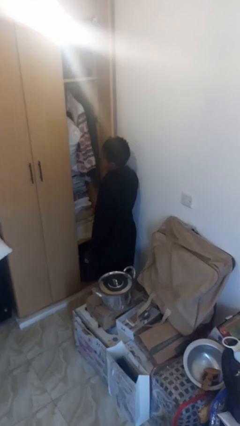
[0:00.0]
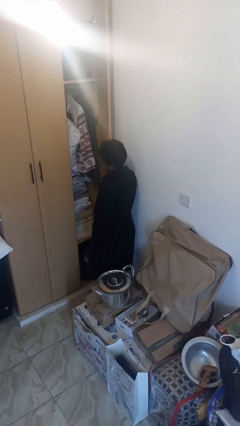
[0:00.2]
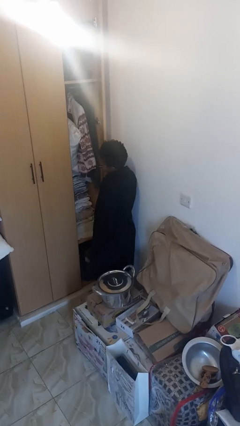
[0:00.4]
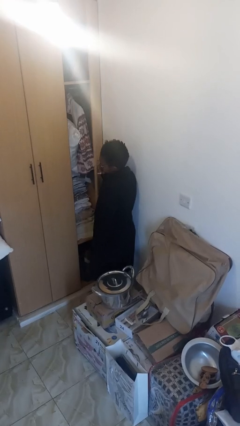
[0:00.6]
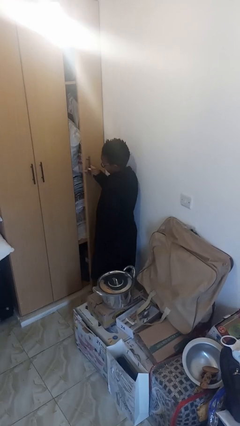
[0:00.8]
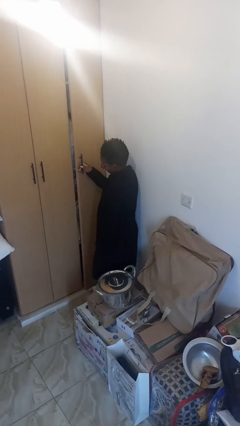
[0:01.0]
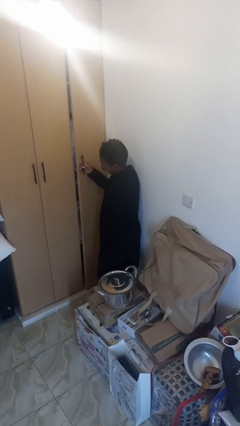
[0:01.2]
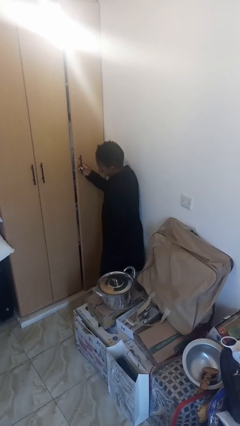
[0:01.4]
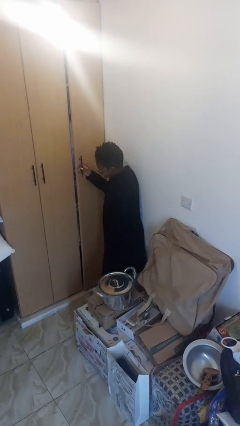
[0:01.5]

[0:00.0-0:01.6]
person closes closet door

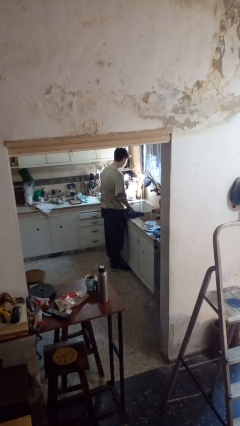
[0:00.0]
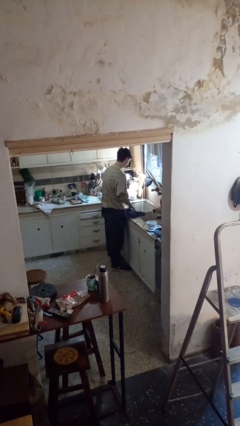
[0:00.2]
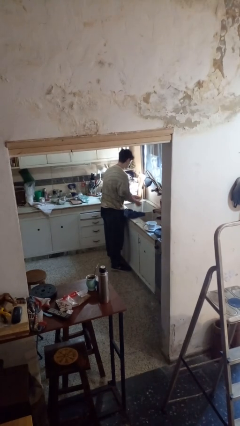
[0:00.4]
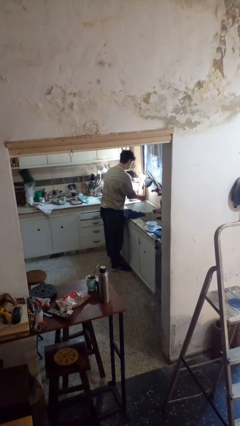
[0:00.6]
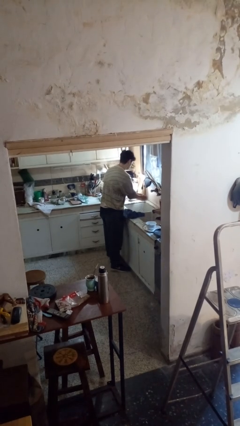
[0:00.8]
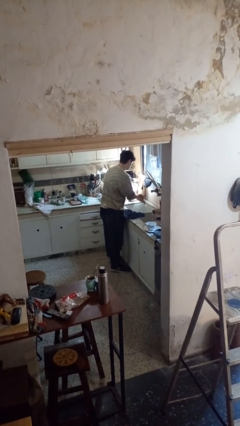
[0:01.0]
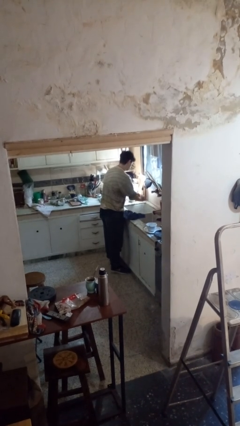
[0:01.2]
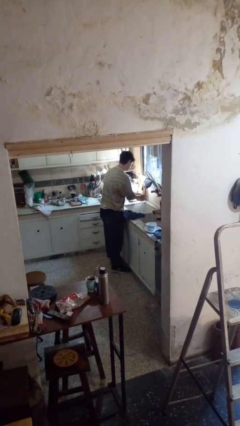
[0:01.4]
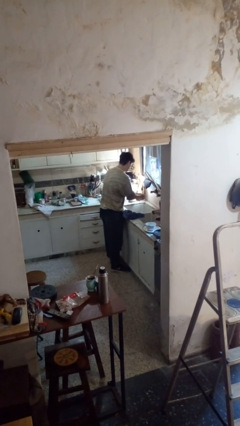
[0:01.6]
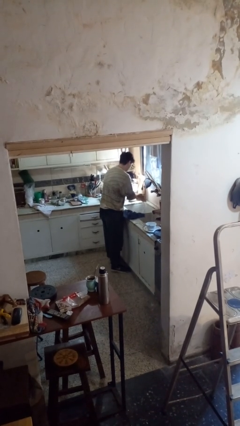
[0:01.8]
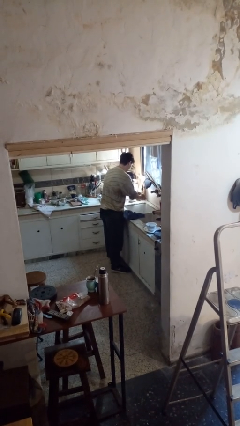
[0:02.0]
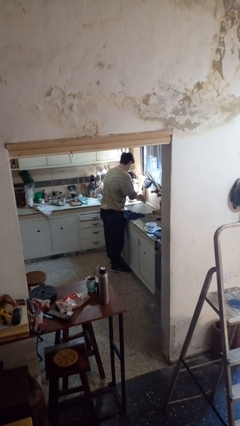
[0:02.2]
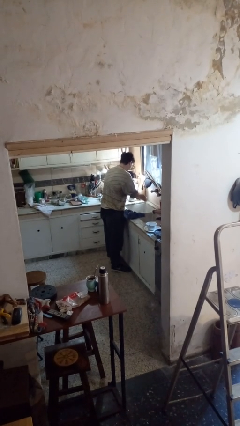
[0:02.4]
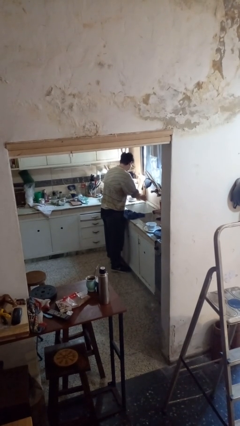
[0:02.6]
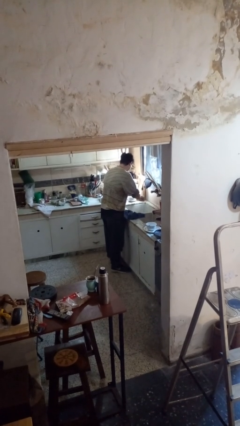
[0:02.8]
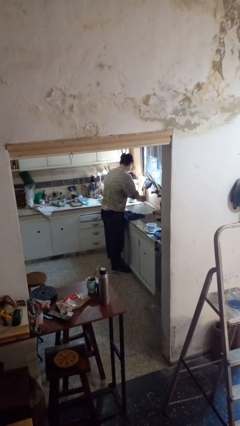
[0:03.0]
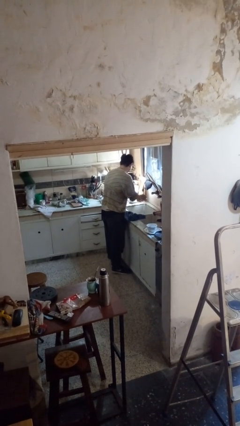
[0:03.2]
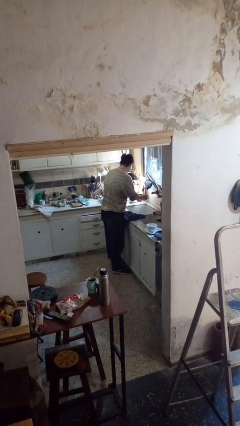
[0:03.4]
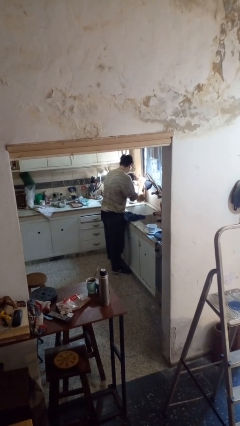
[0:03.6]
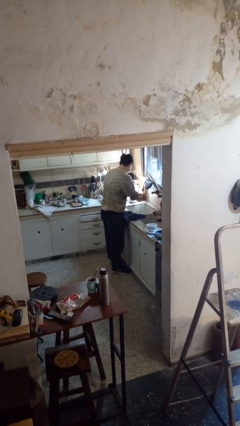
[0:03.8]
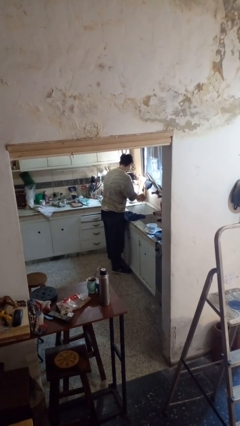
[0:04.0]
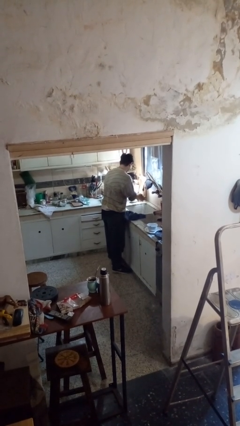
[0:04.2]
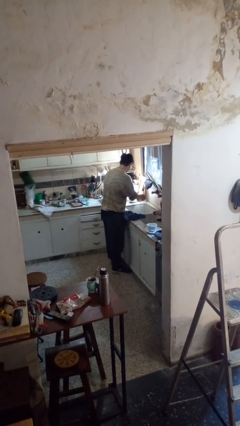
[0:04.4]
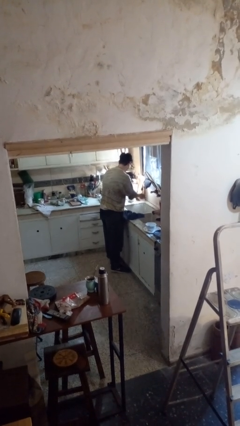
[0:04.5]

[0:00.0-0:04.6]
person washes hands

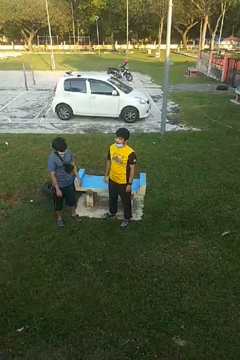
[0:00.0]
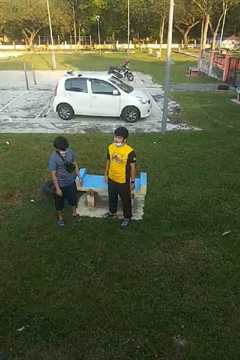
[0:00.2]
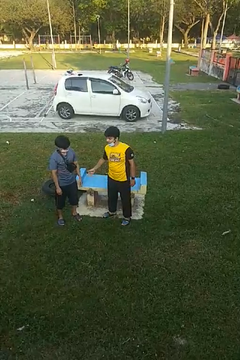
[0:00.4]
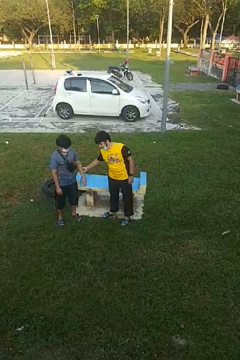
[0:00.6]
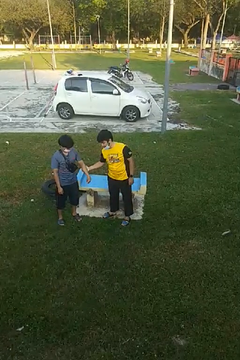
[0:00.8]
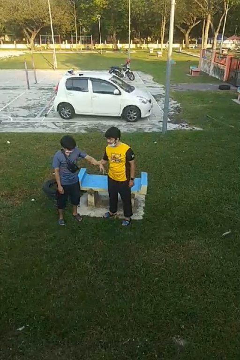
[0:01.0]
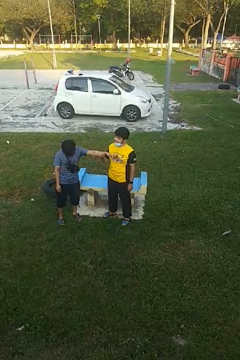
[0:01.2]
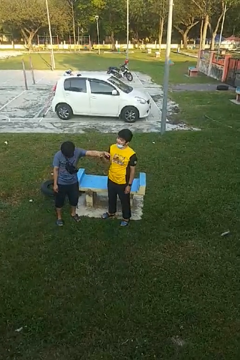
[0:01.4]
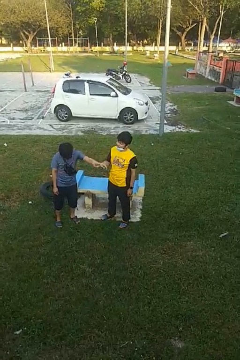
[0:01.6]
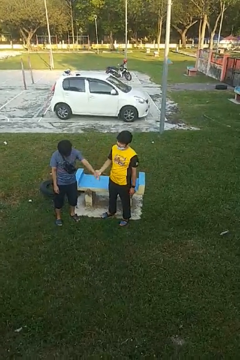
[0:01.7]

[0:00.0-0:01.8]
person grabs person by forearm

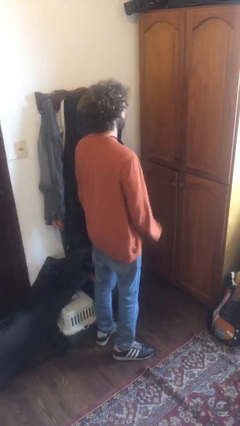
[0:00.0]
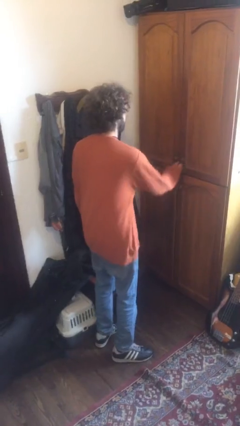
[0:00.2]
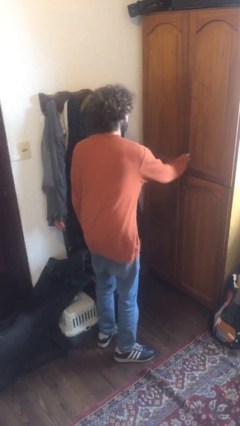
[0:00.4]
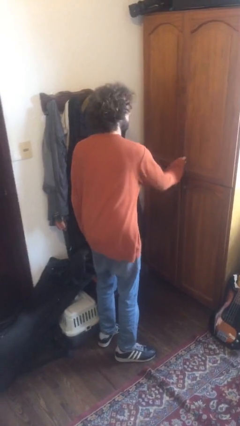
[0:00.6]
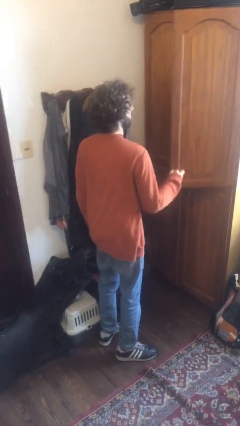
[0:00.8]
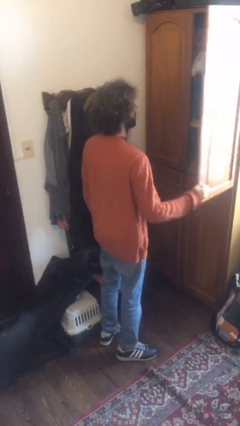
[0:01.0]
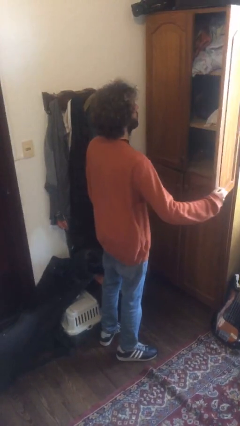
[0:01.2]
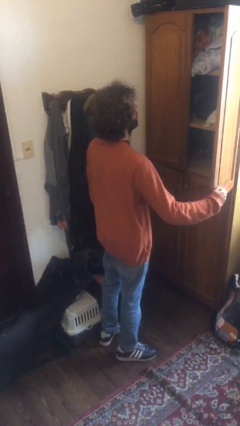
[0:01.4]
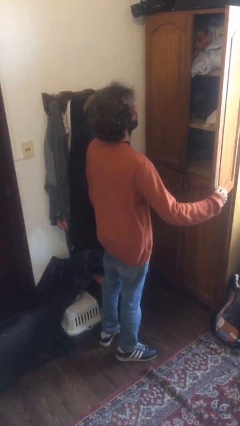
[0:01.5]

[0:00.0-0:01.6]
person opens dresser drawer

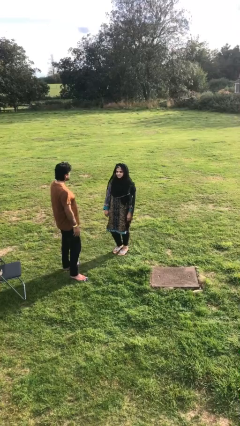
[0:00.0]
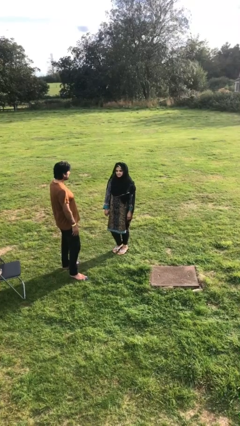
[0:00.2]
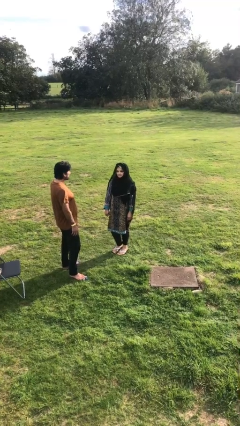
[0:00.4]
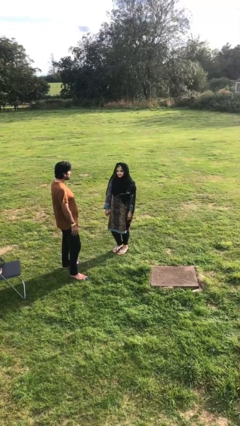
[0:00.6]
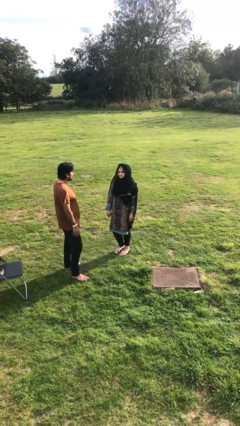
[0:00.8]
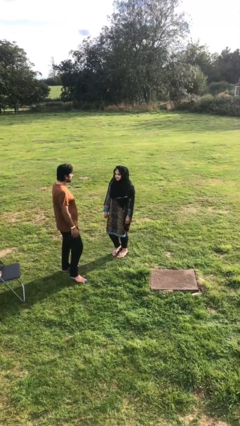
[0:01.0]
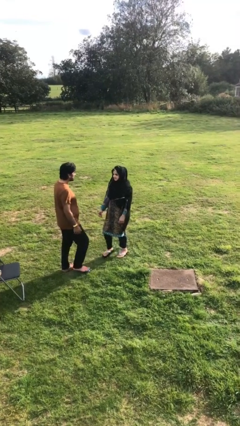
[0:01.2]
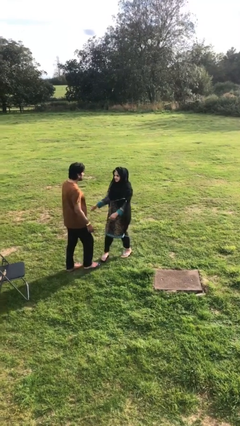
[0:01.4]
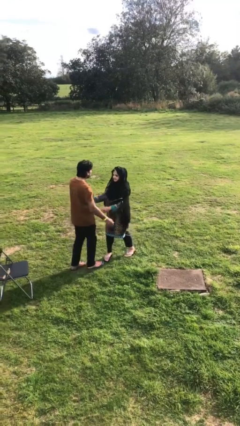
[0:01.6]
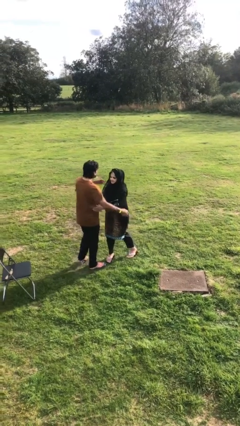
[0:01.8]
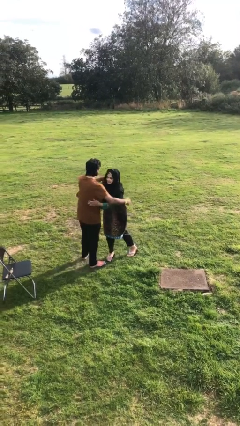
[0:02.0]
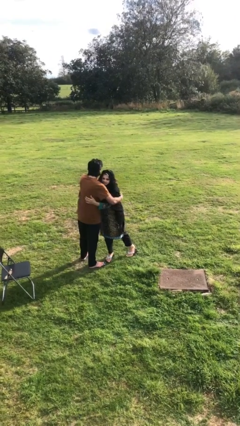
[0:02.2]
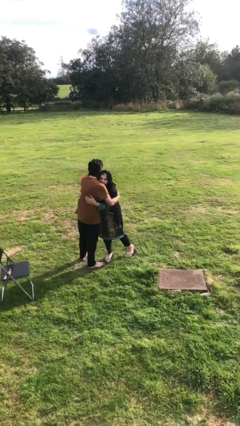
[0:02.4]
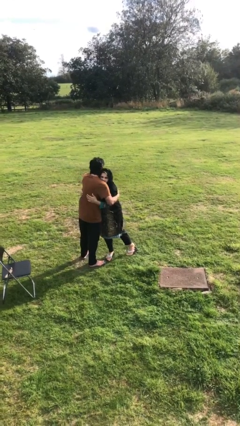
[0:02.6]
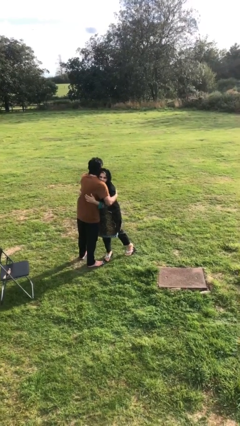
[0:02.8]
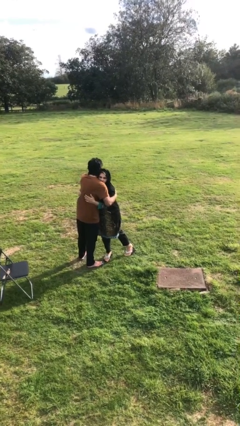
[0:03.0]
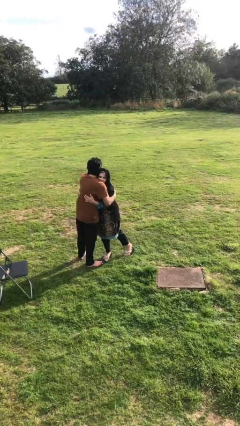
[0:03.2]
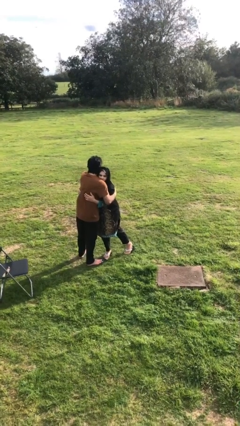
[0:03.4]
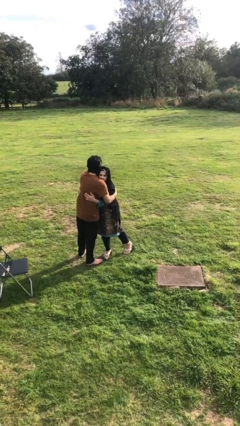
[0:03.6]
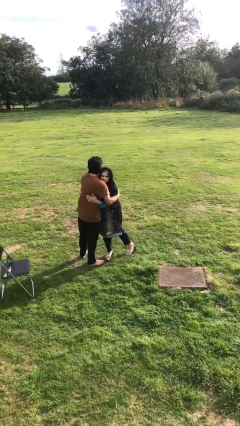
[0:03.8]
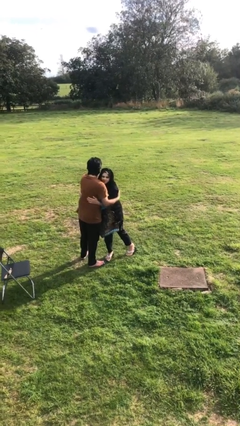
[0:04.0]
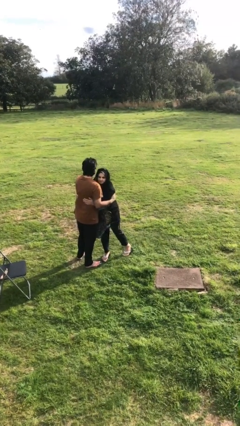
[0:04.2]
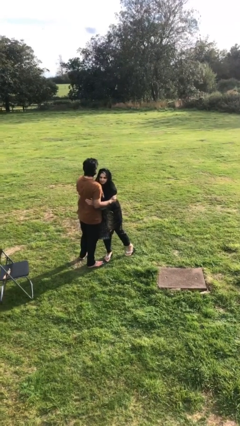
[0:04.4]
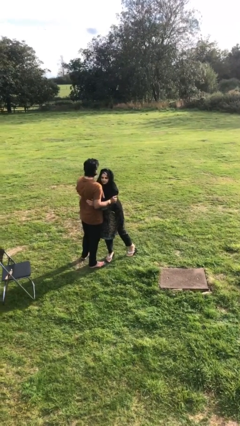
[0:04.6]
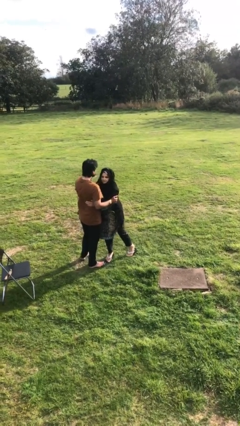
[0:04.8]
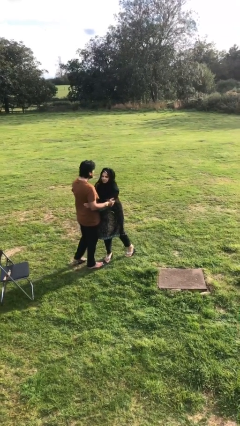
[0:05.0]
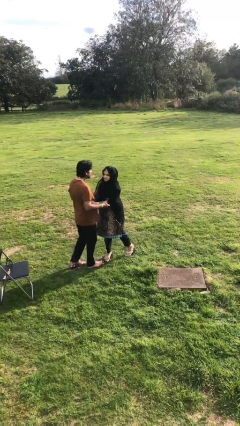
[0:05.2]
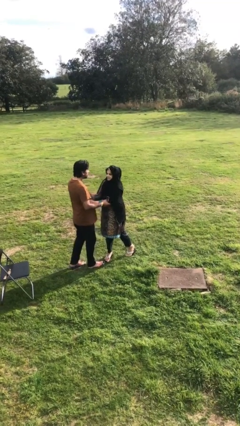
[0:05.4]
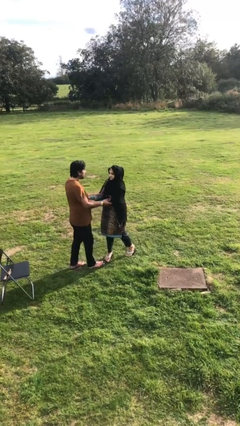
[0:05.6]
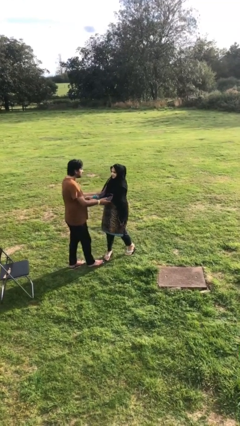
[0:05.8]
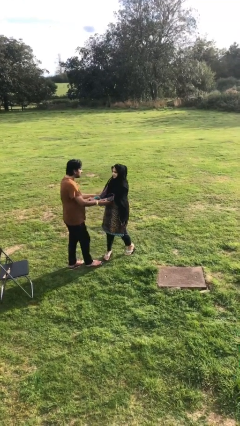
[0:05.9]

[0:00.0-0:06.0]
person embraces person

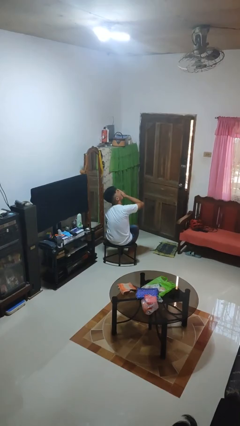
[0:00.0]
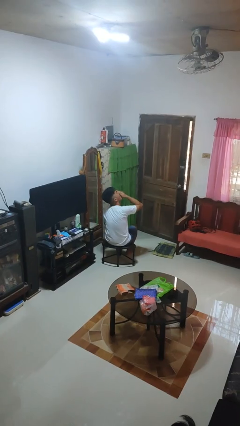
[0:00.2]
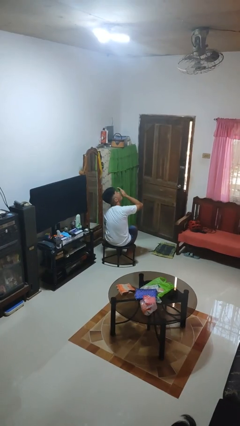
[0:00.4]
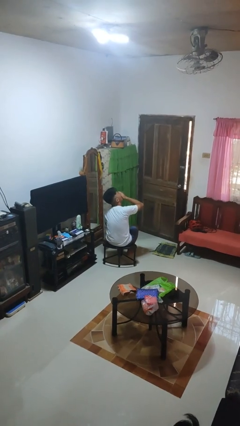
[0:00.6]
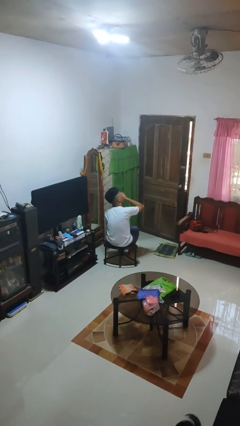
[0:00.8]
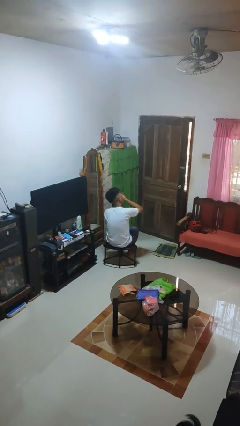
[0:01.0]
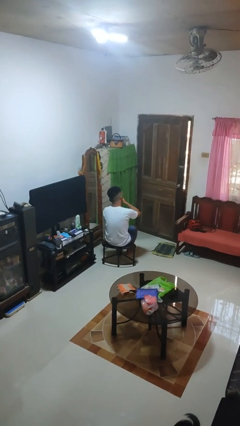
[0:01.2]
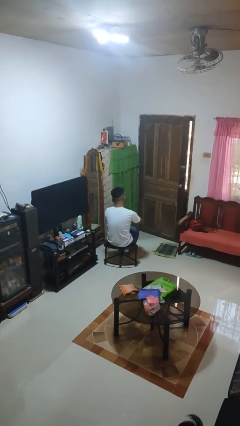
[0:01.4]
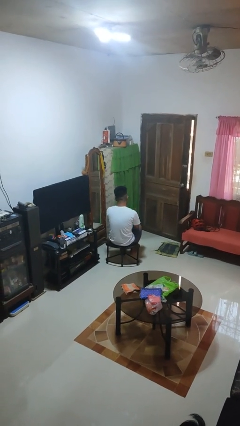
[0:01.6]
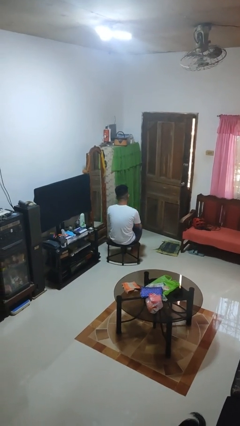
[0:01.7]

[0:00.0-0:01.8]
person yawns
